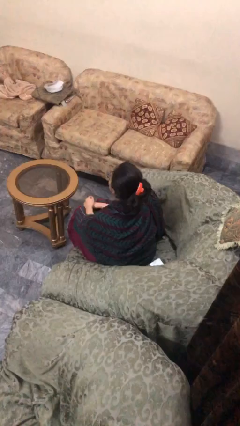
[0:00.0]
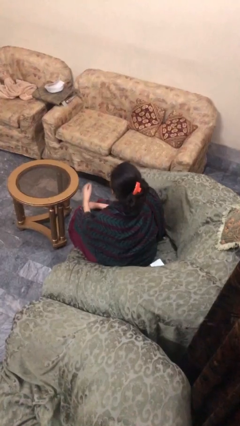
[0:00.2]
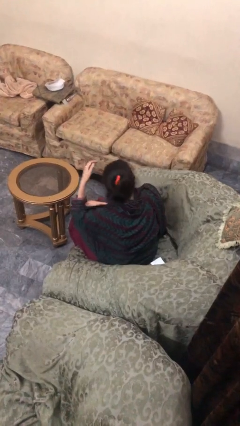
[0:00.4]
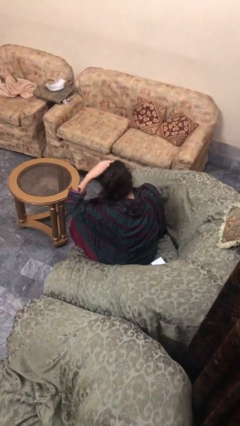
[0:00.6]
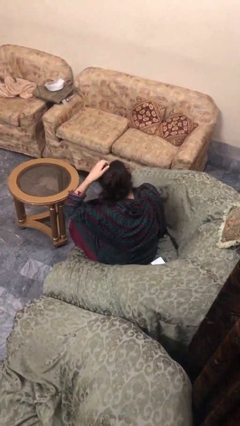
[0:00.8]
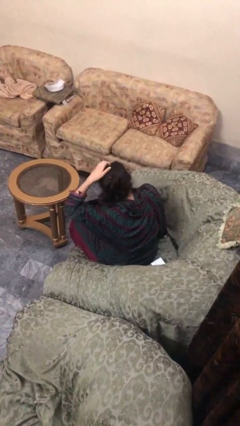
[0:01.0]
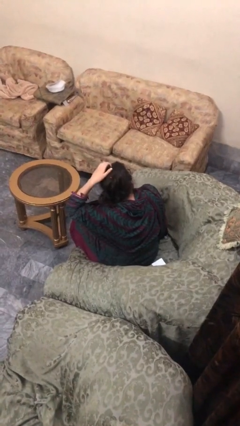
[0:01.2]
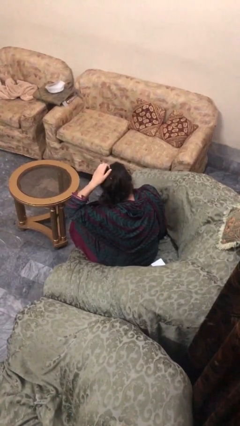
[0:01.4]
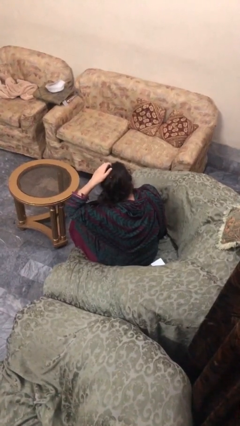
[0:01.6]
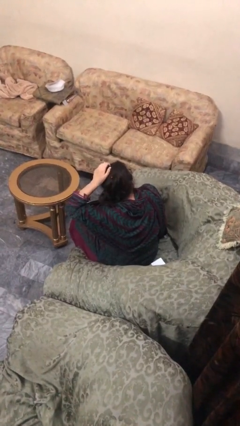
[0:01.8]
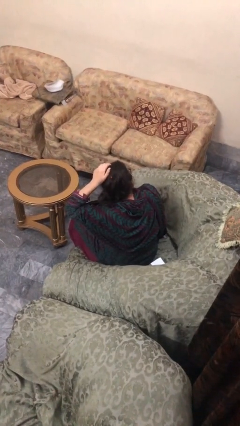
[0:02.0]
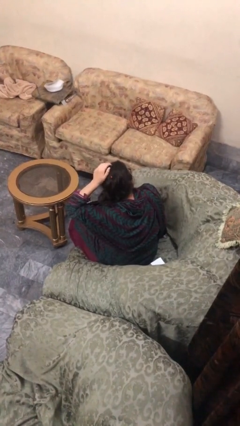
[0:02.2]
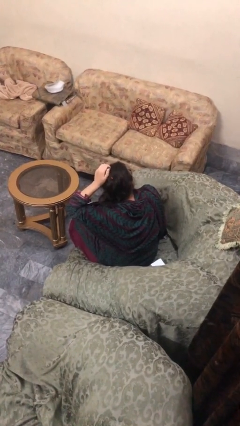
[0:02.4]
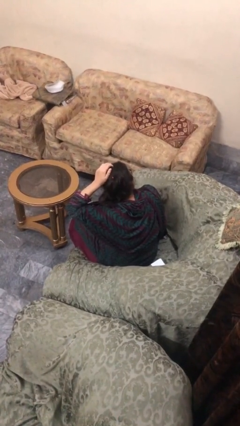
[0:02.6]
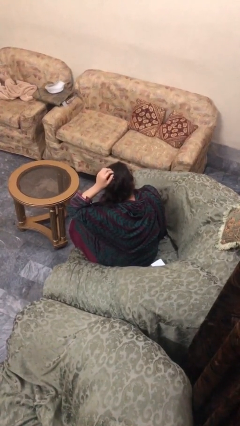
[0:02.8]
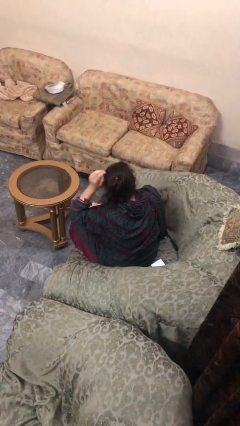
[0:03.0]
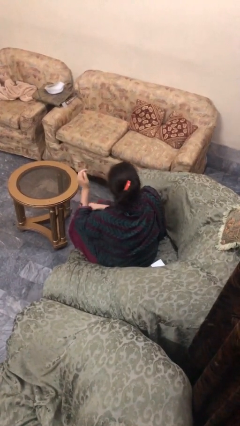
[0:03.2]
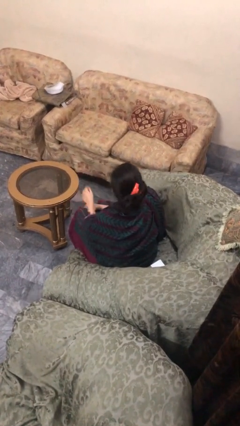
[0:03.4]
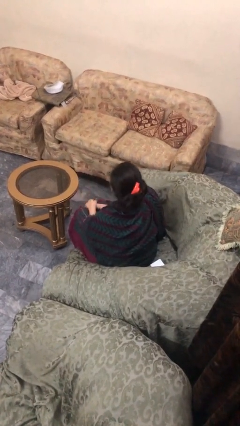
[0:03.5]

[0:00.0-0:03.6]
person strokes hair

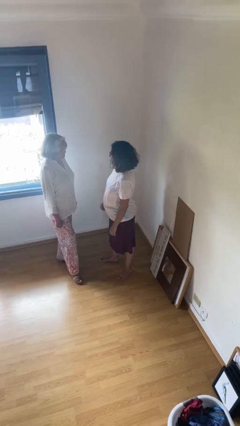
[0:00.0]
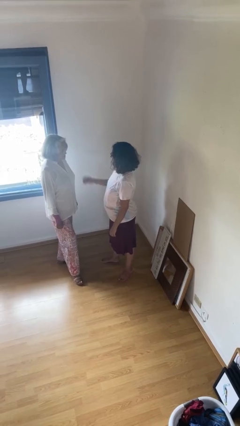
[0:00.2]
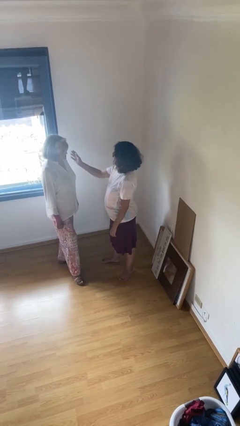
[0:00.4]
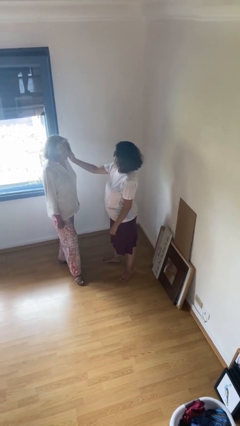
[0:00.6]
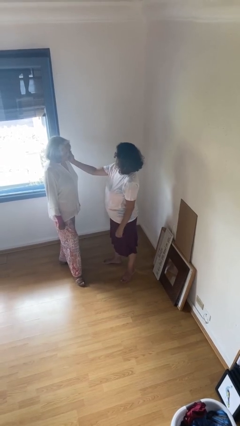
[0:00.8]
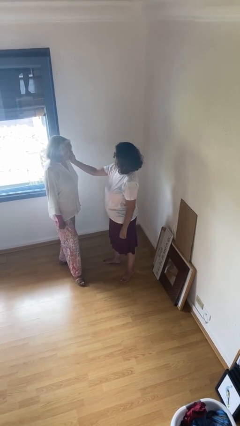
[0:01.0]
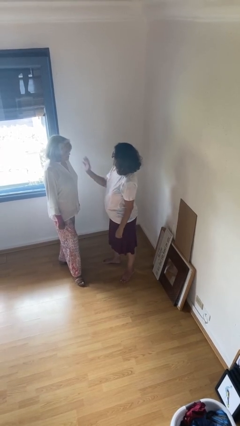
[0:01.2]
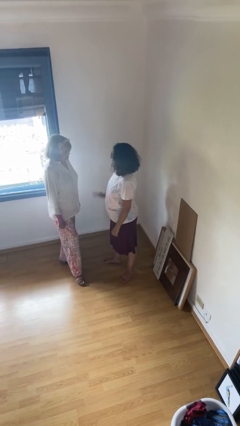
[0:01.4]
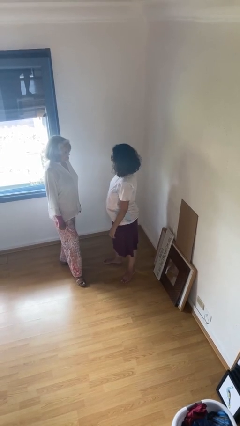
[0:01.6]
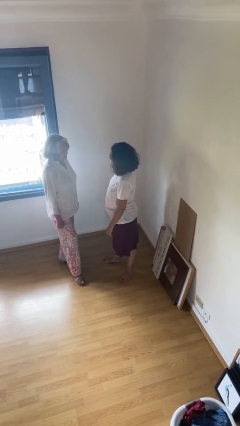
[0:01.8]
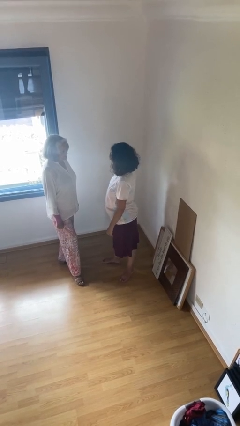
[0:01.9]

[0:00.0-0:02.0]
person touches face of person

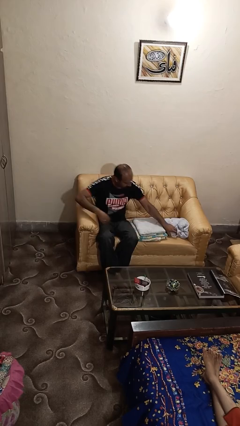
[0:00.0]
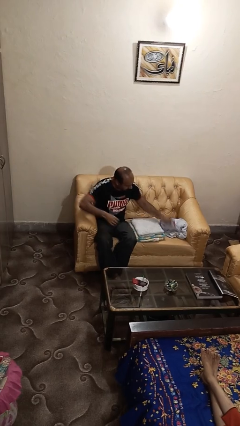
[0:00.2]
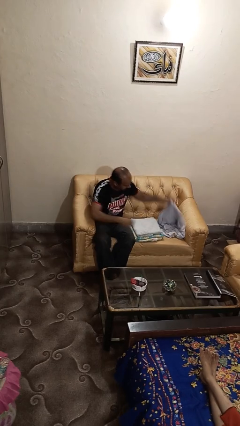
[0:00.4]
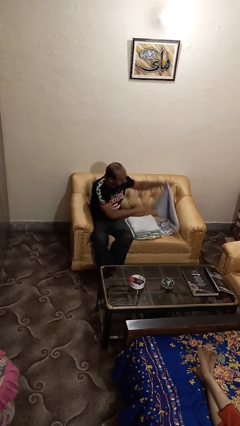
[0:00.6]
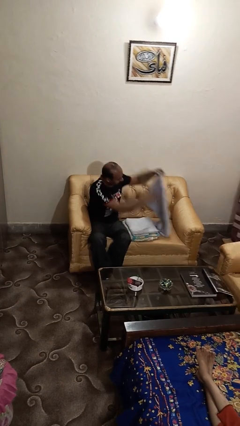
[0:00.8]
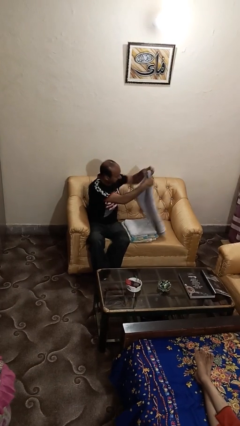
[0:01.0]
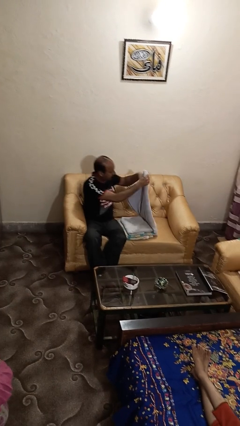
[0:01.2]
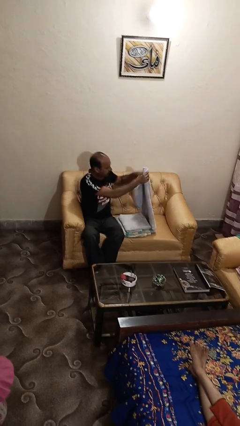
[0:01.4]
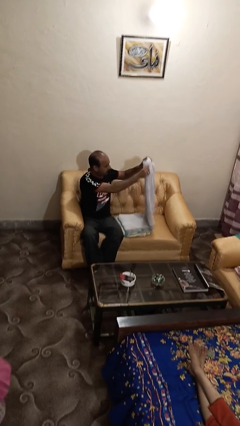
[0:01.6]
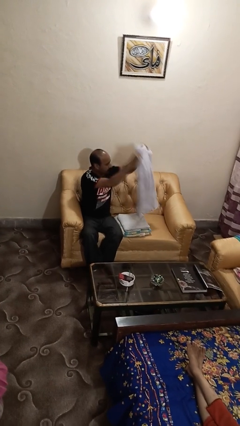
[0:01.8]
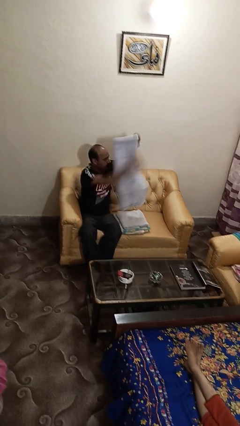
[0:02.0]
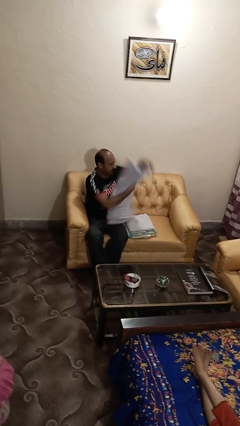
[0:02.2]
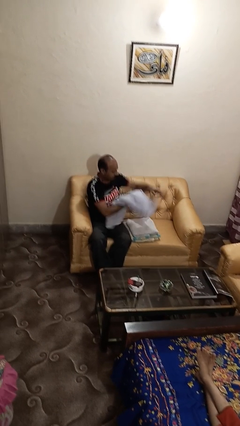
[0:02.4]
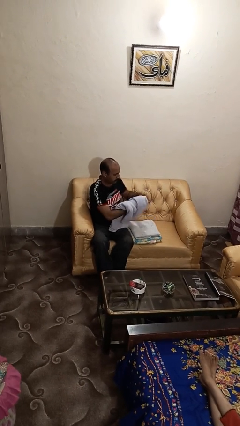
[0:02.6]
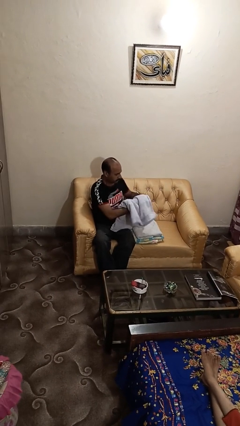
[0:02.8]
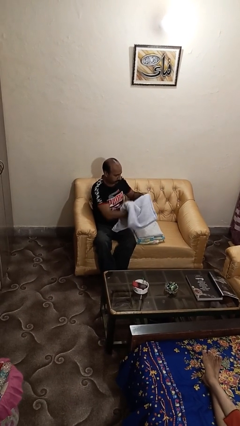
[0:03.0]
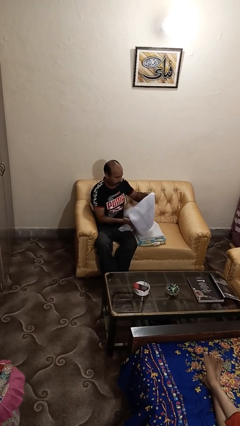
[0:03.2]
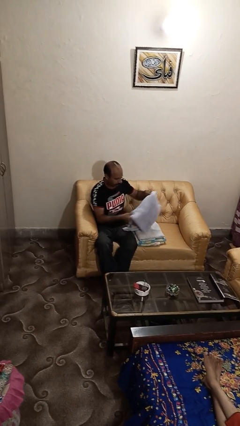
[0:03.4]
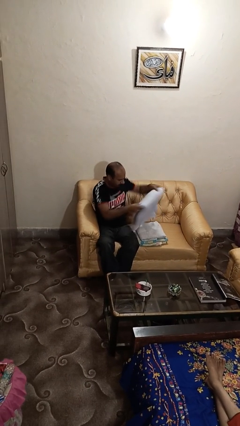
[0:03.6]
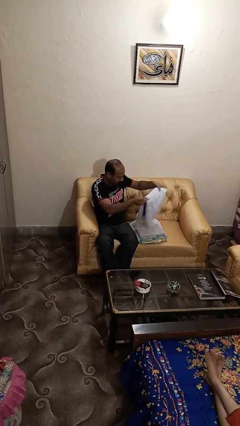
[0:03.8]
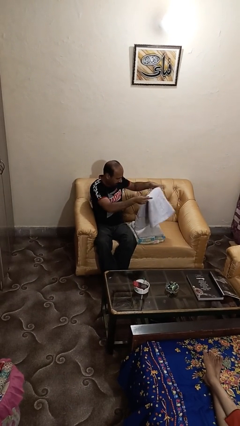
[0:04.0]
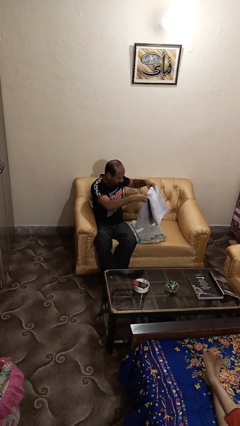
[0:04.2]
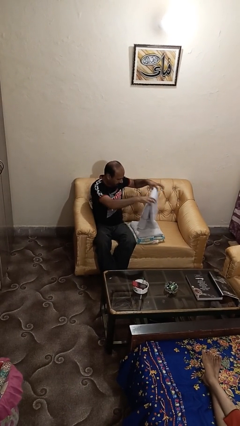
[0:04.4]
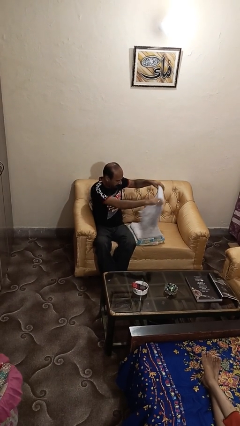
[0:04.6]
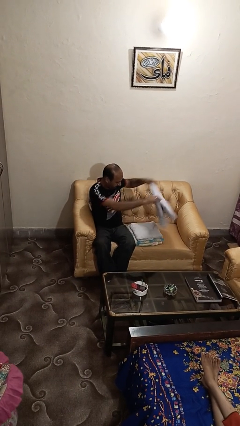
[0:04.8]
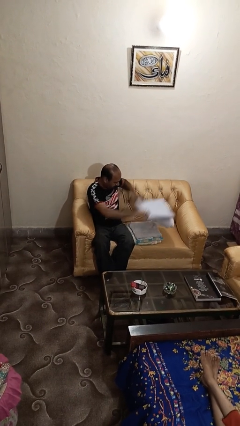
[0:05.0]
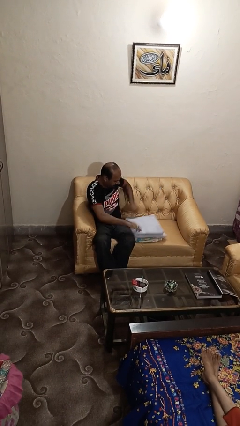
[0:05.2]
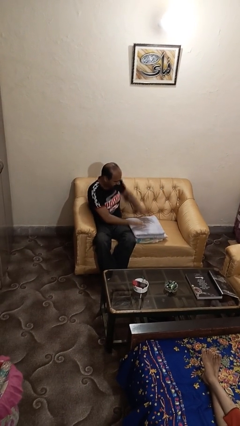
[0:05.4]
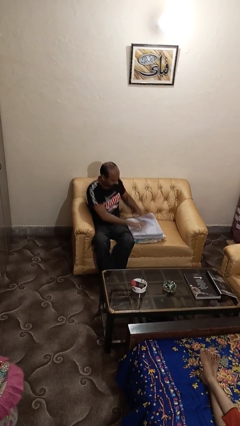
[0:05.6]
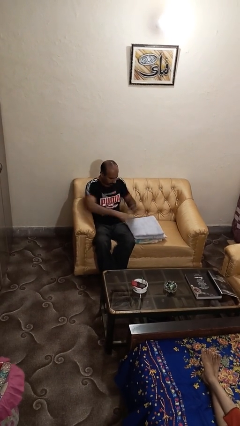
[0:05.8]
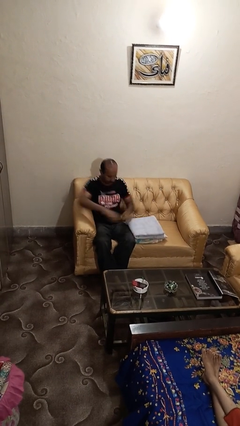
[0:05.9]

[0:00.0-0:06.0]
person folds towel

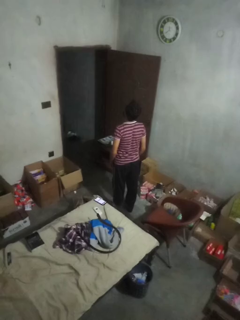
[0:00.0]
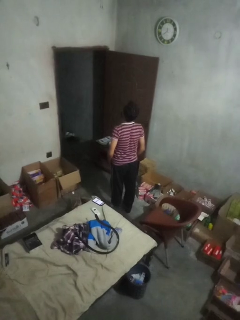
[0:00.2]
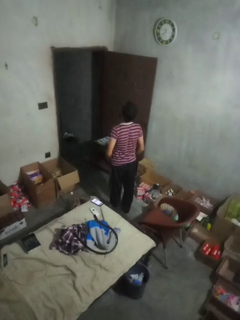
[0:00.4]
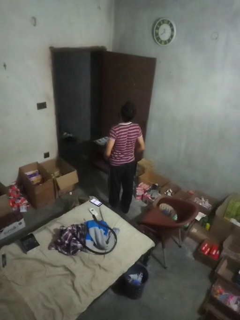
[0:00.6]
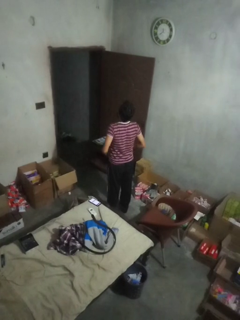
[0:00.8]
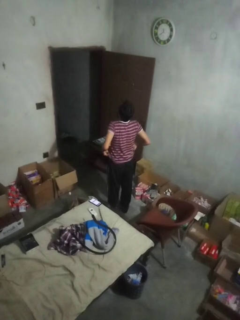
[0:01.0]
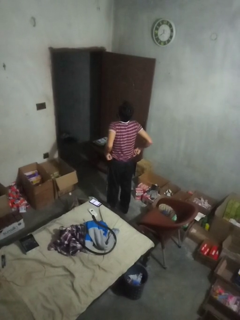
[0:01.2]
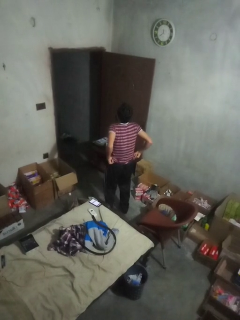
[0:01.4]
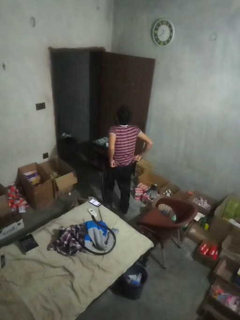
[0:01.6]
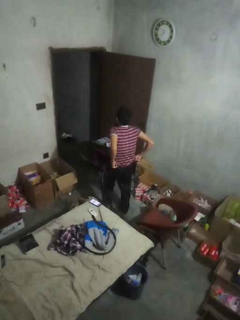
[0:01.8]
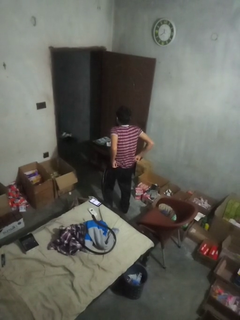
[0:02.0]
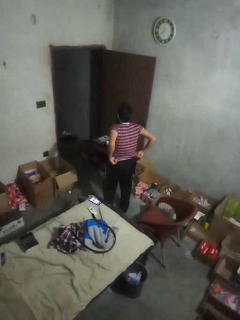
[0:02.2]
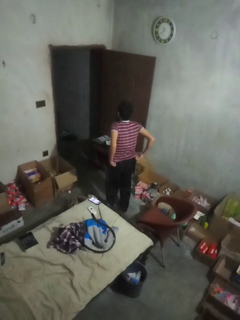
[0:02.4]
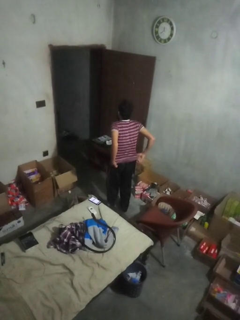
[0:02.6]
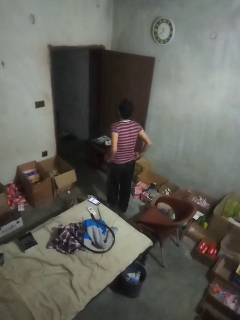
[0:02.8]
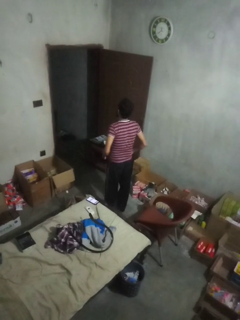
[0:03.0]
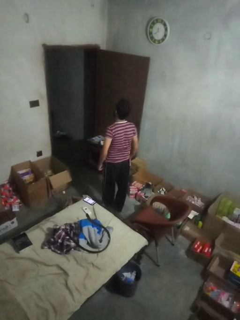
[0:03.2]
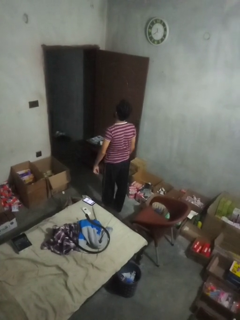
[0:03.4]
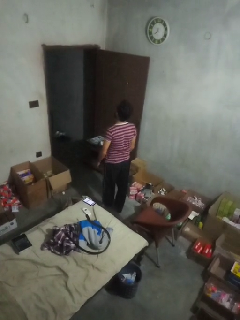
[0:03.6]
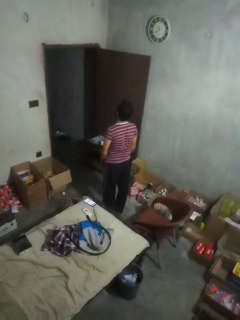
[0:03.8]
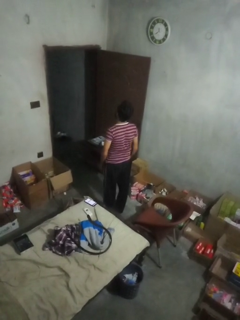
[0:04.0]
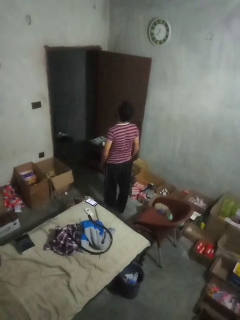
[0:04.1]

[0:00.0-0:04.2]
person hikes up pants

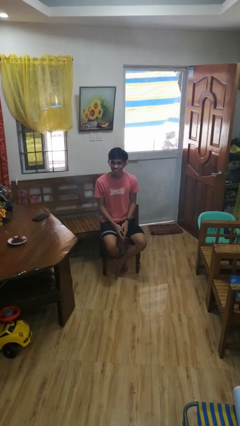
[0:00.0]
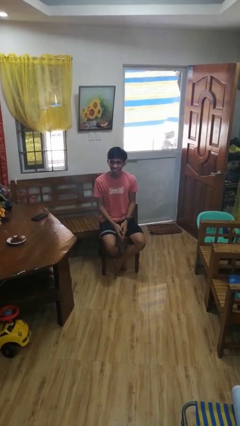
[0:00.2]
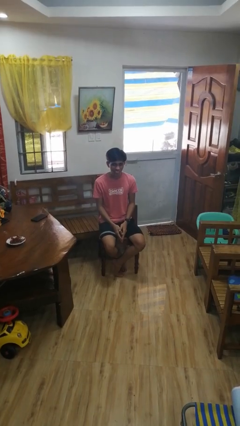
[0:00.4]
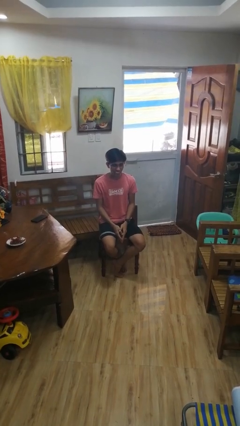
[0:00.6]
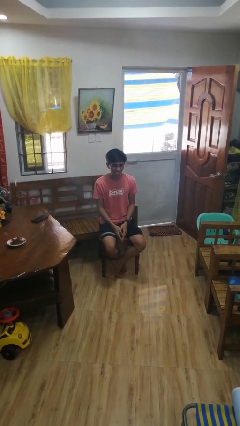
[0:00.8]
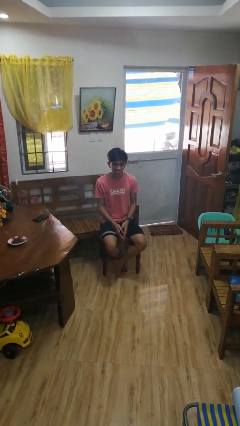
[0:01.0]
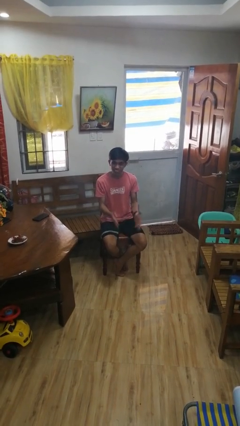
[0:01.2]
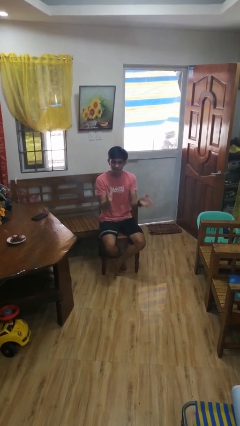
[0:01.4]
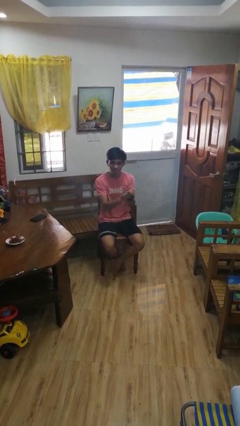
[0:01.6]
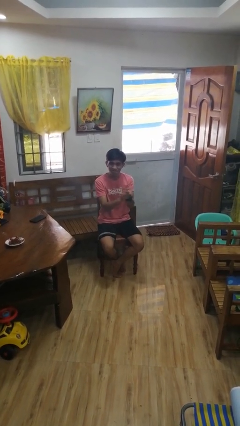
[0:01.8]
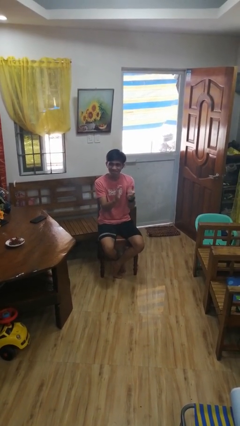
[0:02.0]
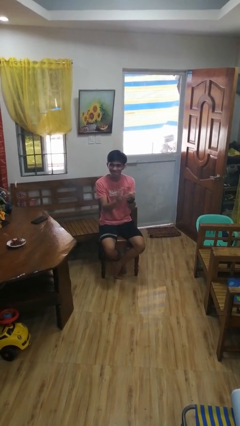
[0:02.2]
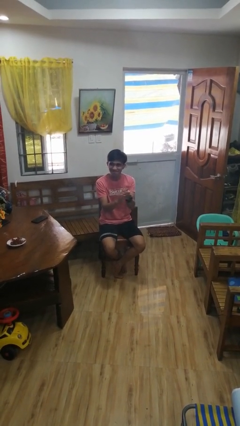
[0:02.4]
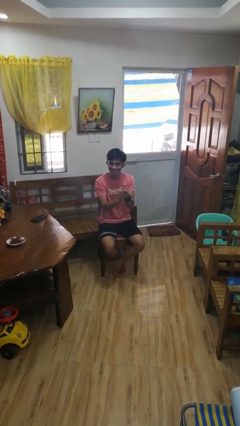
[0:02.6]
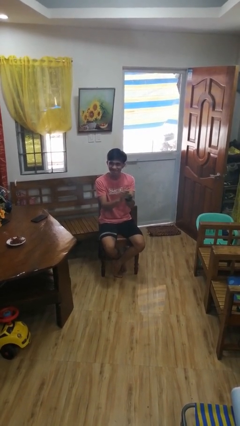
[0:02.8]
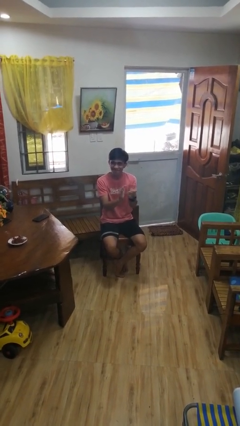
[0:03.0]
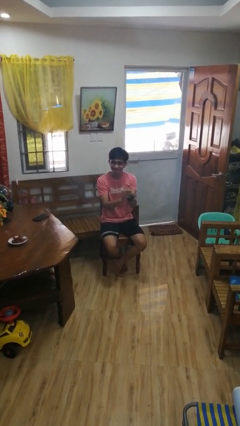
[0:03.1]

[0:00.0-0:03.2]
person claps hands
